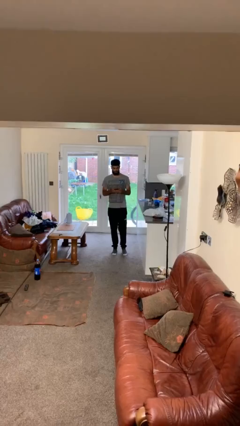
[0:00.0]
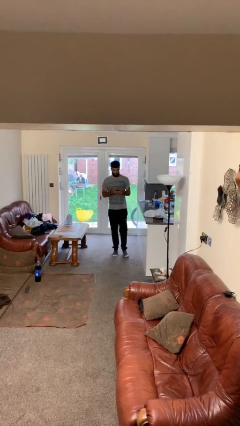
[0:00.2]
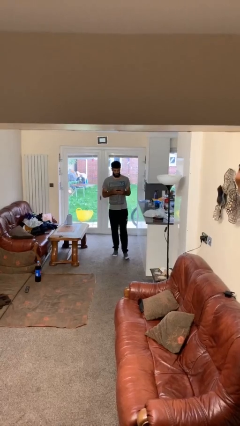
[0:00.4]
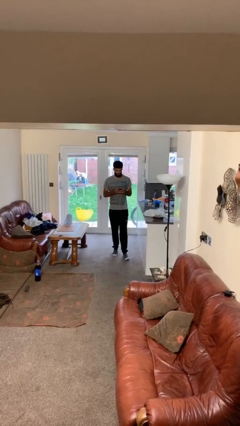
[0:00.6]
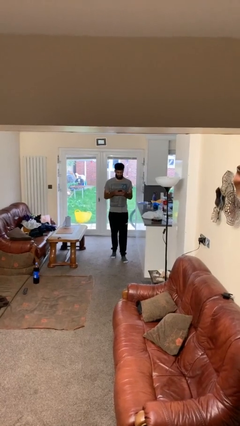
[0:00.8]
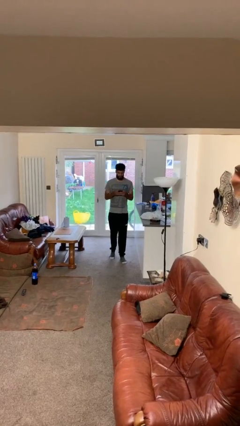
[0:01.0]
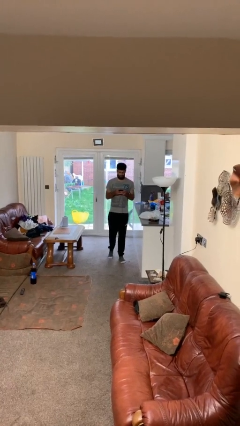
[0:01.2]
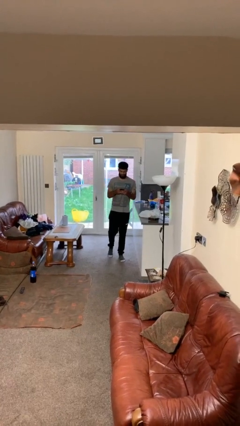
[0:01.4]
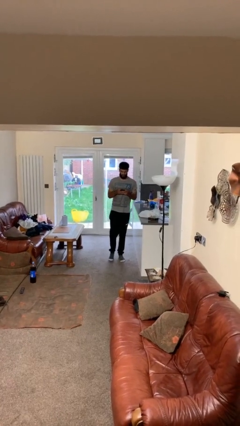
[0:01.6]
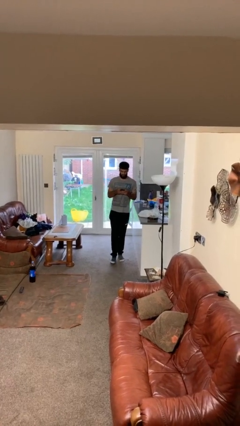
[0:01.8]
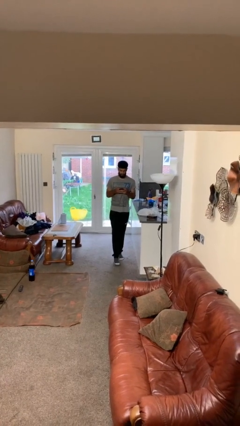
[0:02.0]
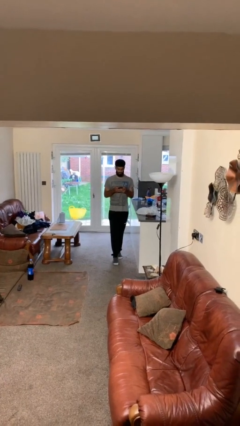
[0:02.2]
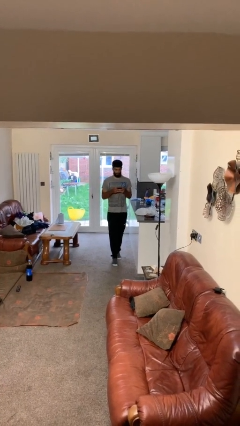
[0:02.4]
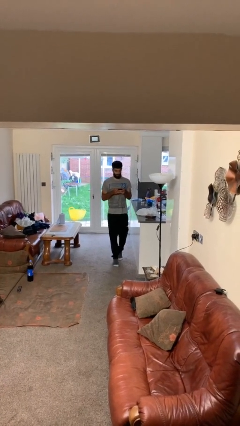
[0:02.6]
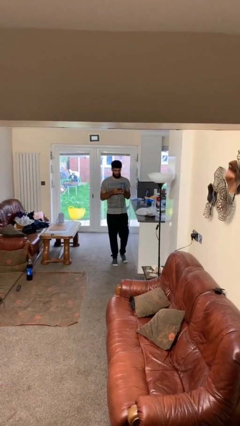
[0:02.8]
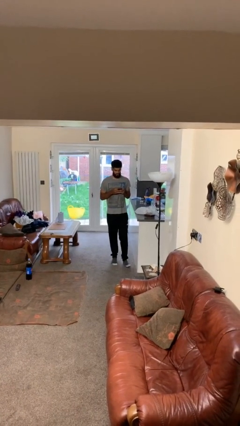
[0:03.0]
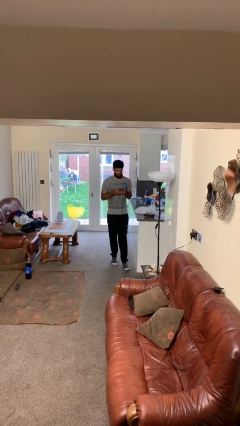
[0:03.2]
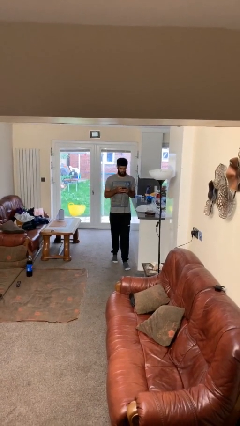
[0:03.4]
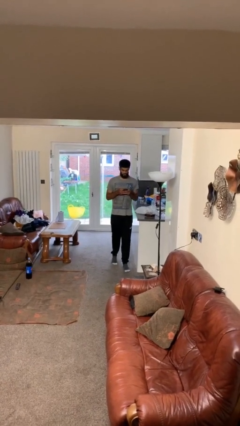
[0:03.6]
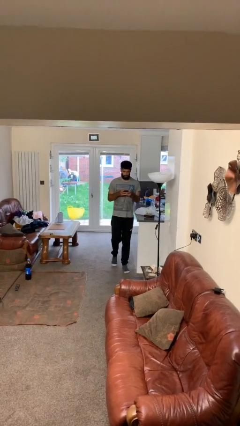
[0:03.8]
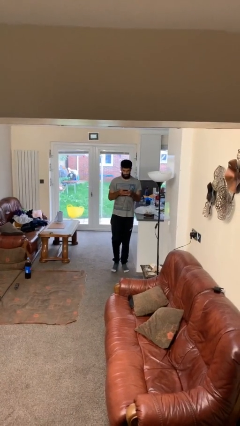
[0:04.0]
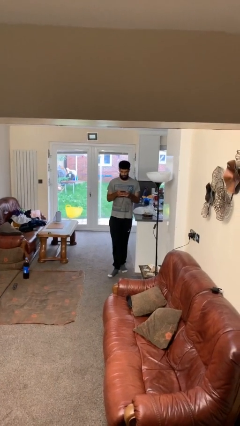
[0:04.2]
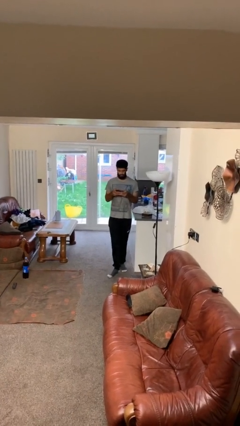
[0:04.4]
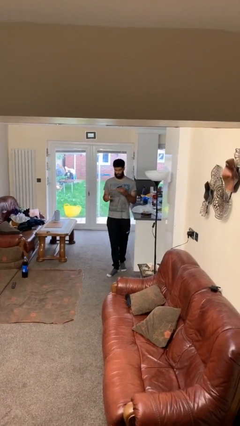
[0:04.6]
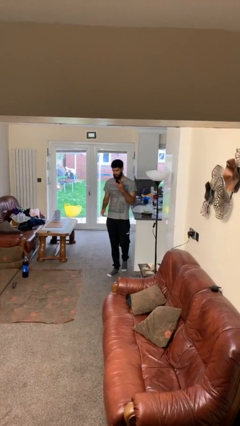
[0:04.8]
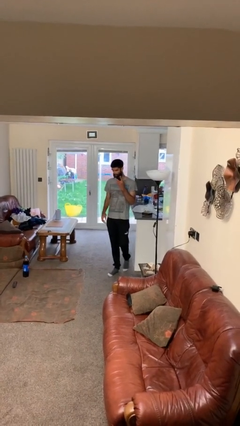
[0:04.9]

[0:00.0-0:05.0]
person texts on phone

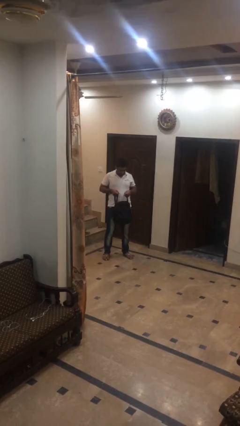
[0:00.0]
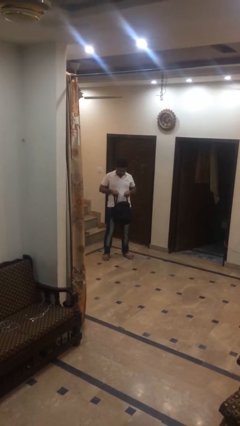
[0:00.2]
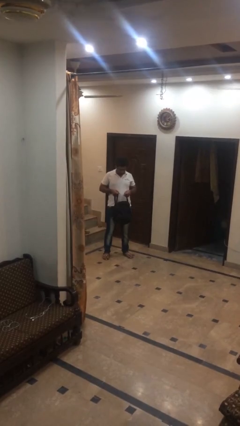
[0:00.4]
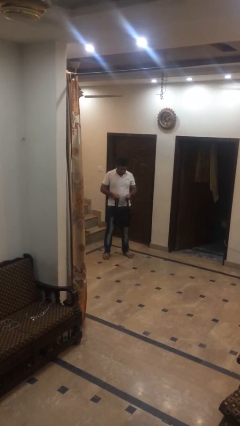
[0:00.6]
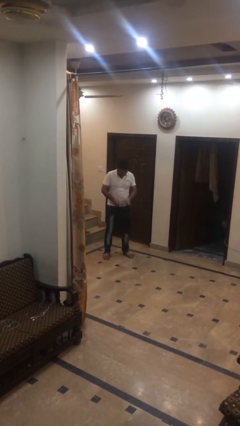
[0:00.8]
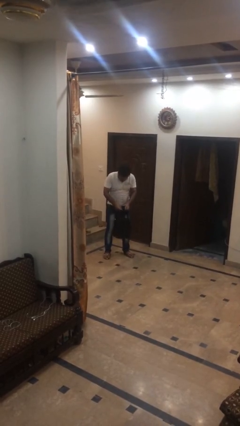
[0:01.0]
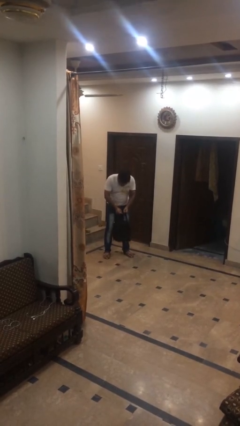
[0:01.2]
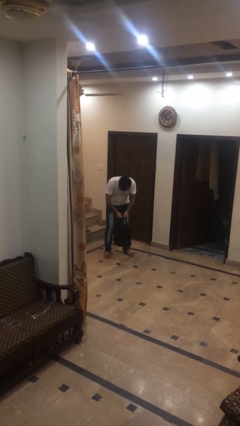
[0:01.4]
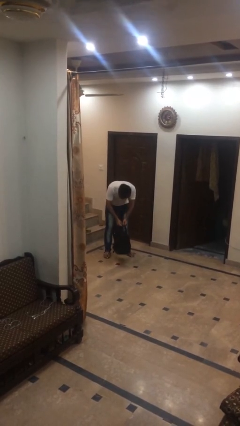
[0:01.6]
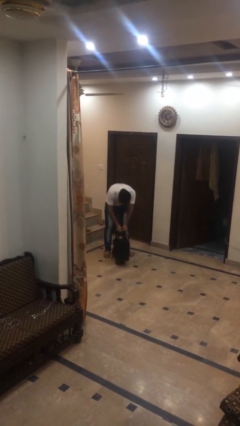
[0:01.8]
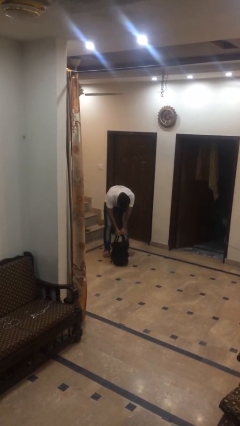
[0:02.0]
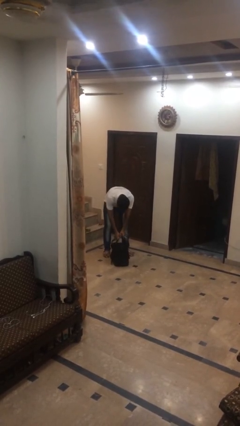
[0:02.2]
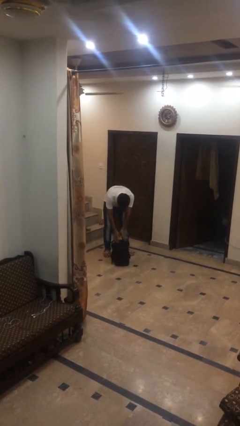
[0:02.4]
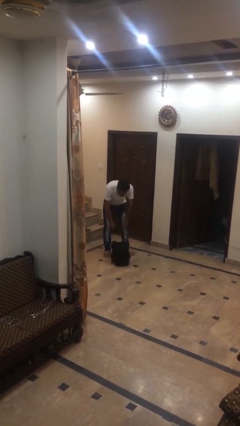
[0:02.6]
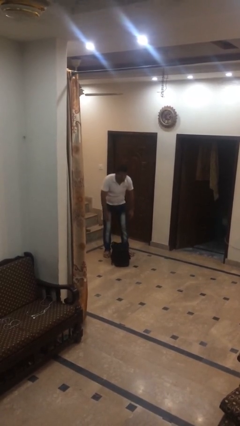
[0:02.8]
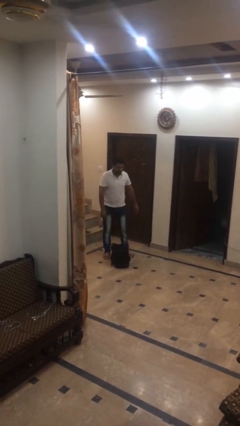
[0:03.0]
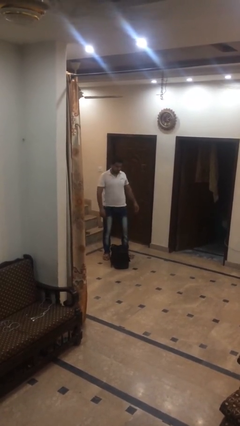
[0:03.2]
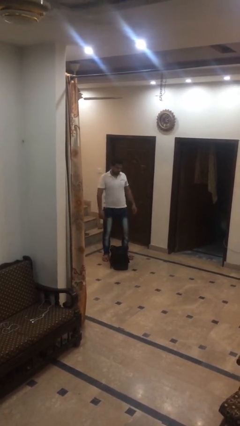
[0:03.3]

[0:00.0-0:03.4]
person puts down object on floor

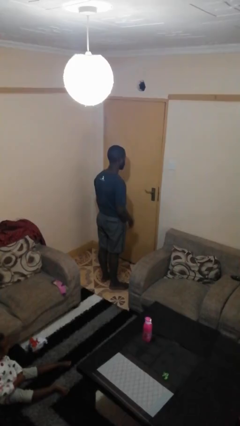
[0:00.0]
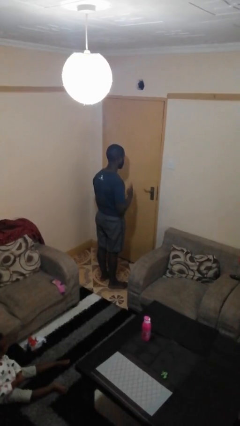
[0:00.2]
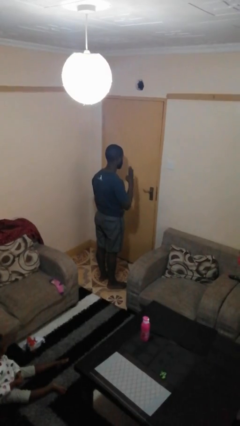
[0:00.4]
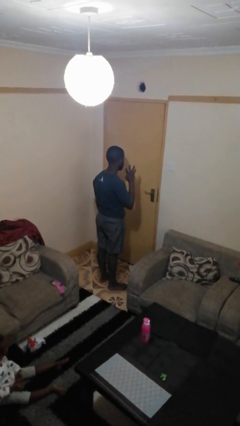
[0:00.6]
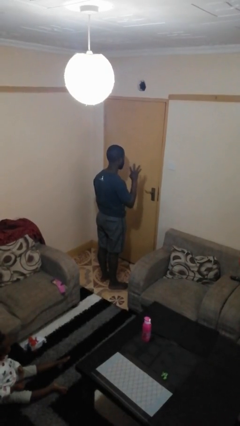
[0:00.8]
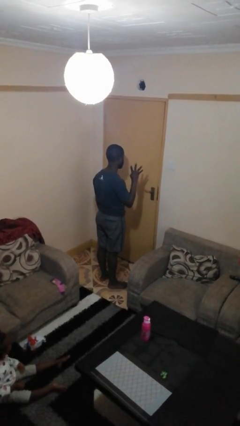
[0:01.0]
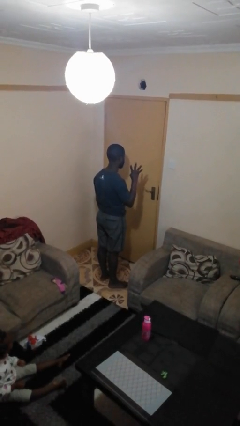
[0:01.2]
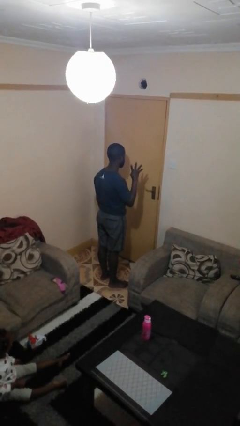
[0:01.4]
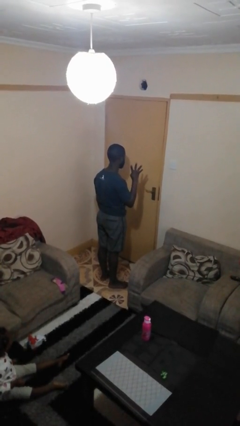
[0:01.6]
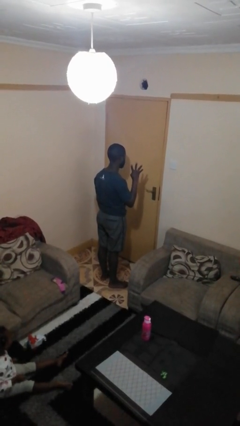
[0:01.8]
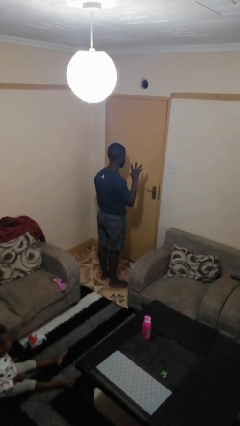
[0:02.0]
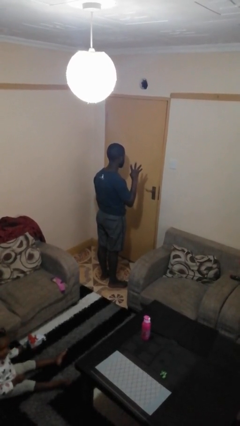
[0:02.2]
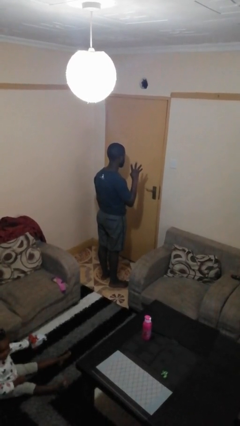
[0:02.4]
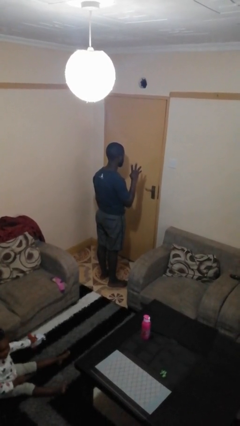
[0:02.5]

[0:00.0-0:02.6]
person gestures number four

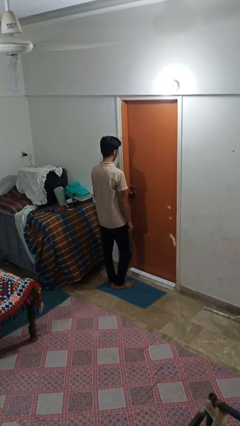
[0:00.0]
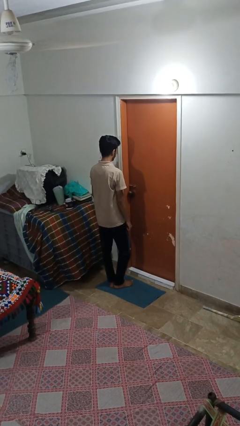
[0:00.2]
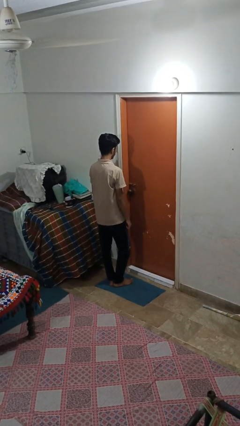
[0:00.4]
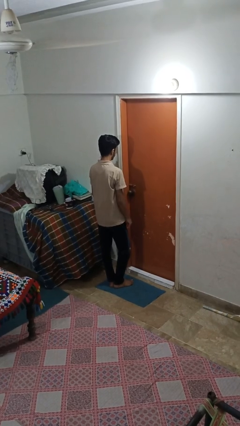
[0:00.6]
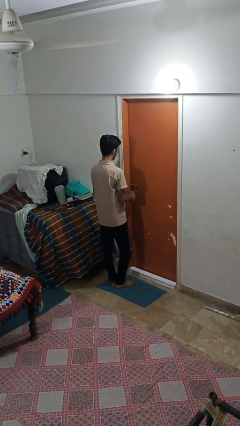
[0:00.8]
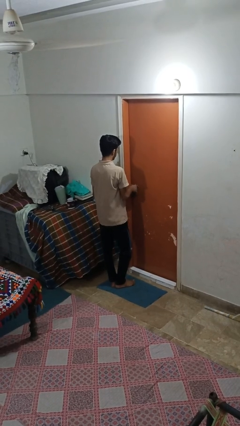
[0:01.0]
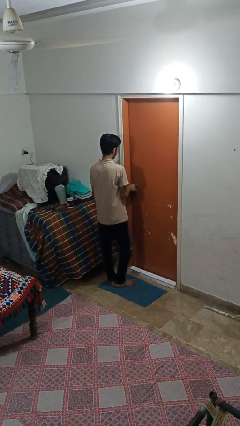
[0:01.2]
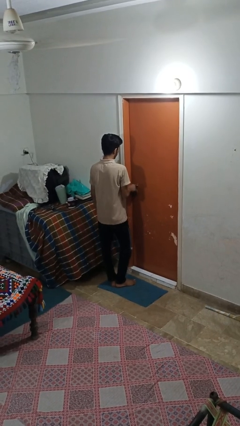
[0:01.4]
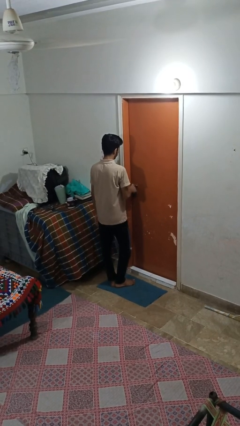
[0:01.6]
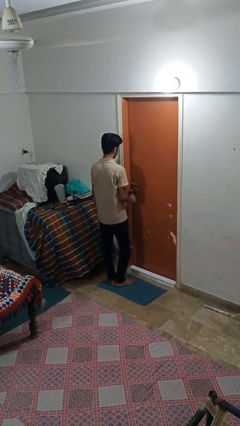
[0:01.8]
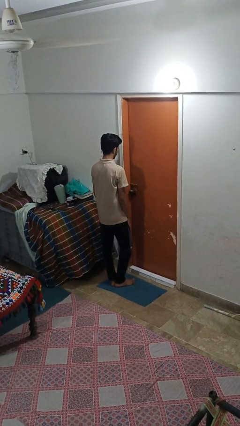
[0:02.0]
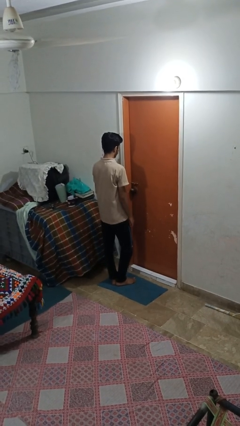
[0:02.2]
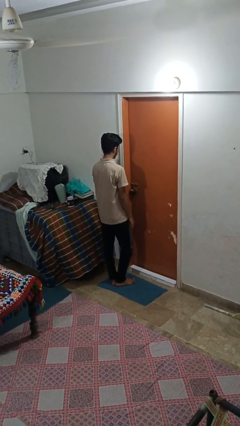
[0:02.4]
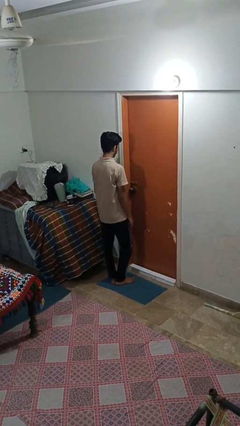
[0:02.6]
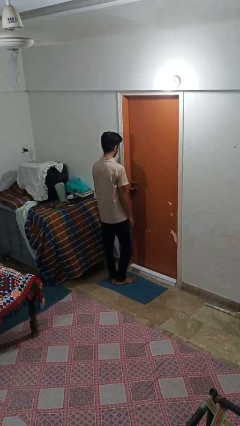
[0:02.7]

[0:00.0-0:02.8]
person locks door with keys

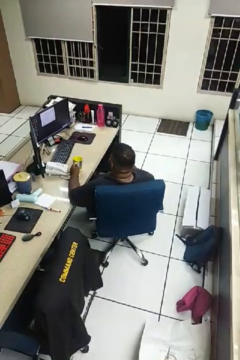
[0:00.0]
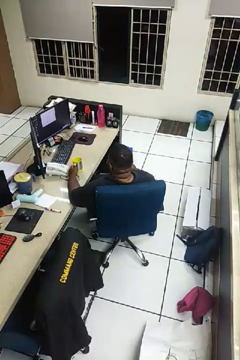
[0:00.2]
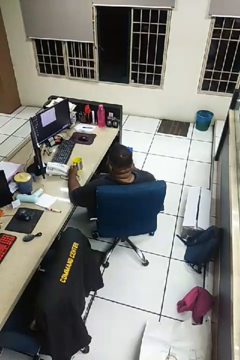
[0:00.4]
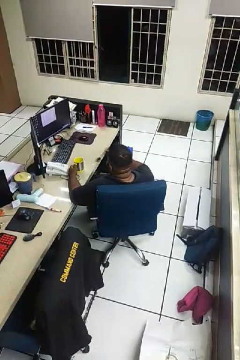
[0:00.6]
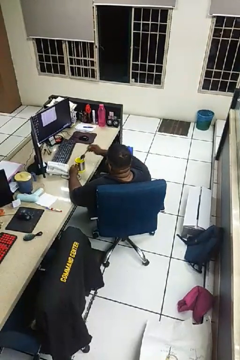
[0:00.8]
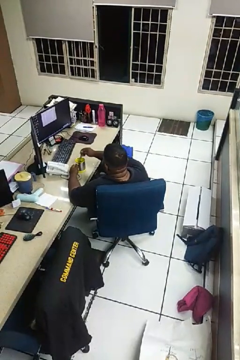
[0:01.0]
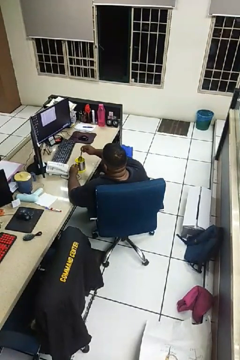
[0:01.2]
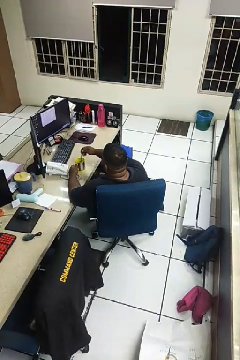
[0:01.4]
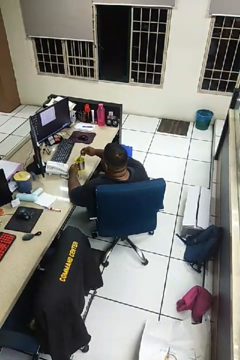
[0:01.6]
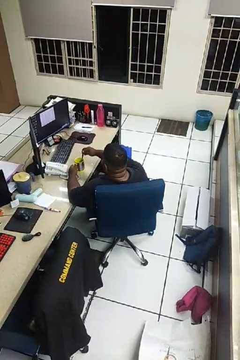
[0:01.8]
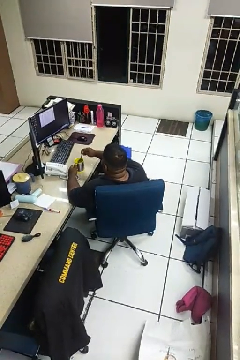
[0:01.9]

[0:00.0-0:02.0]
person stirs mug

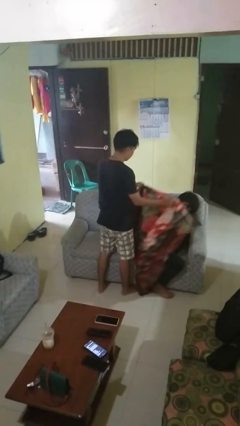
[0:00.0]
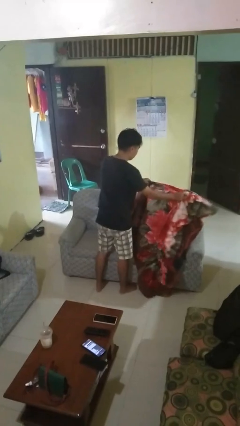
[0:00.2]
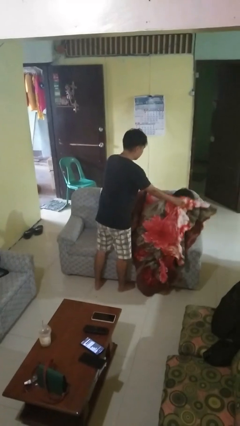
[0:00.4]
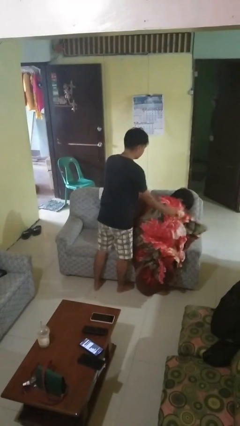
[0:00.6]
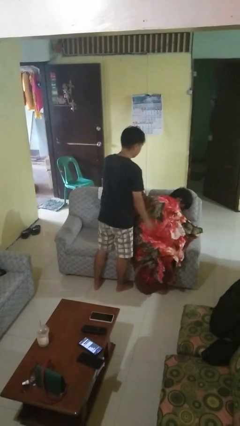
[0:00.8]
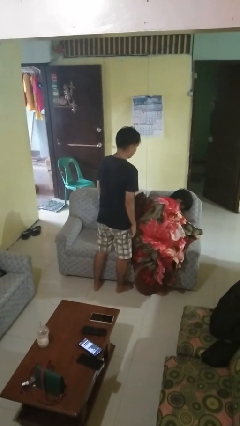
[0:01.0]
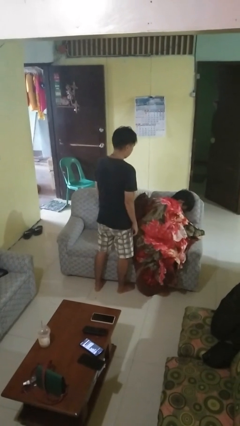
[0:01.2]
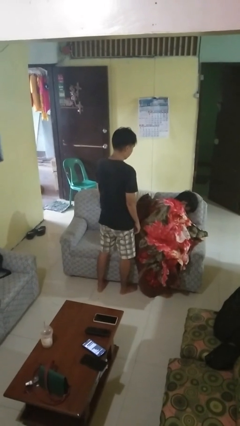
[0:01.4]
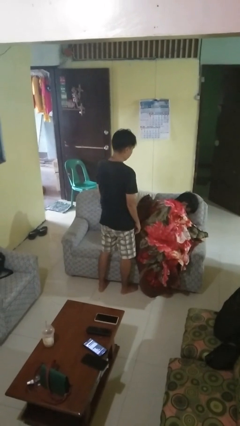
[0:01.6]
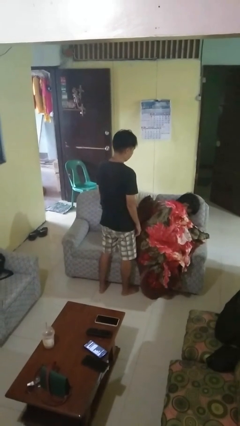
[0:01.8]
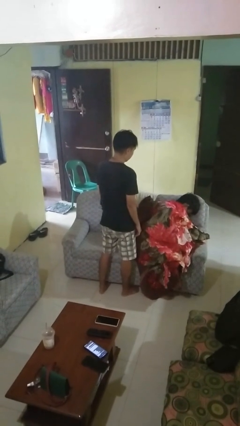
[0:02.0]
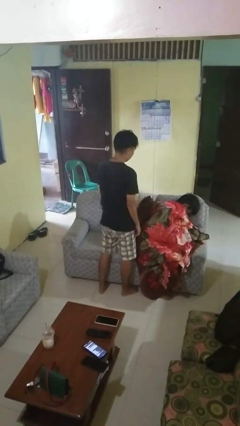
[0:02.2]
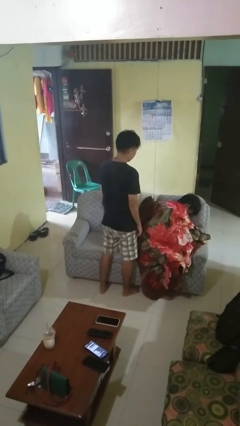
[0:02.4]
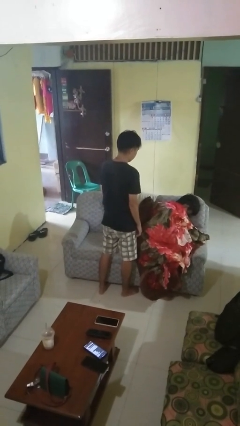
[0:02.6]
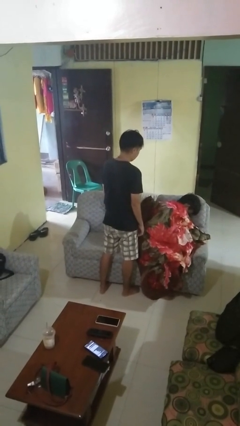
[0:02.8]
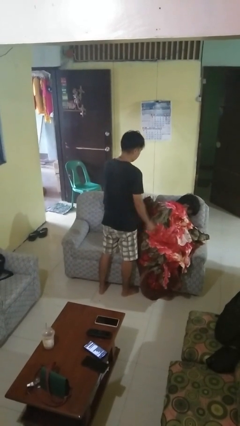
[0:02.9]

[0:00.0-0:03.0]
person covers friend with blanket
